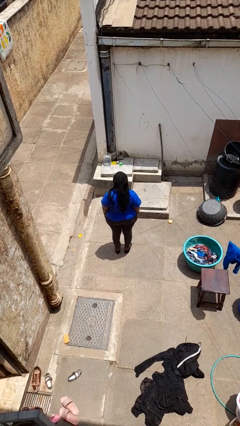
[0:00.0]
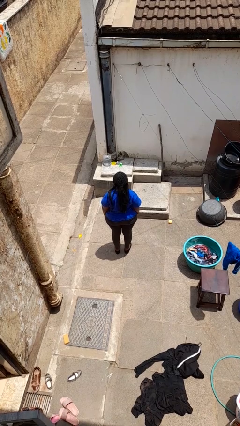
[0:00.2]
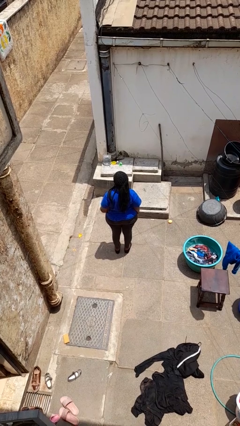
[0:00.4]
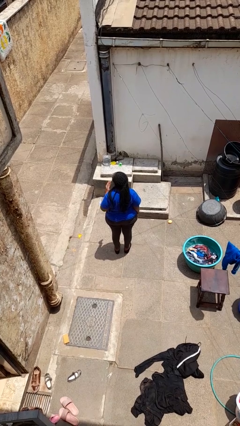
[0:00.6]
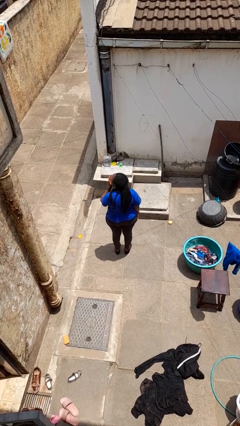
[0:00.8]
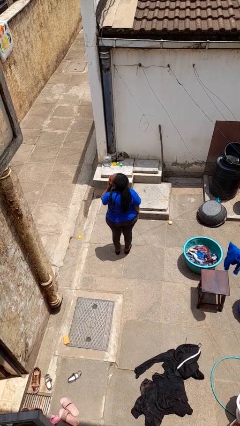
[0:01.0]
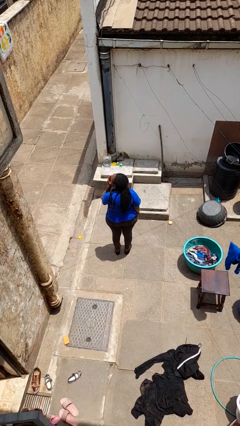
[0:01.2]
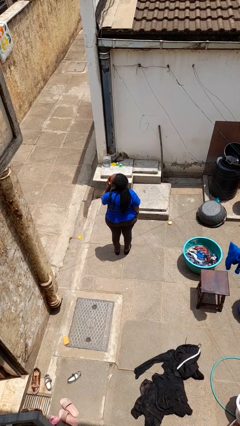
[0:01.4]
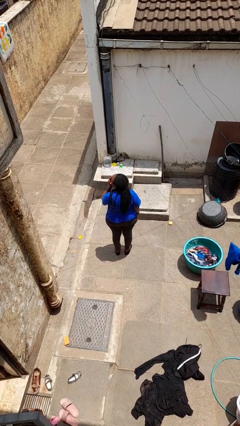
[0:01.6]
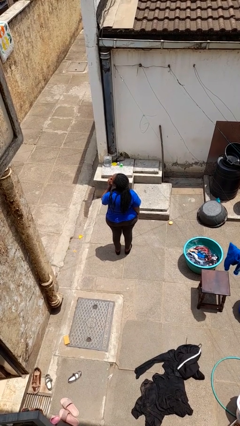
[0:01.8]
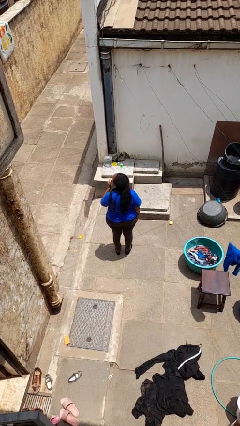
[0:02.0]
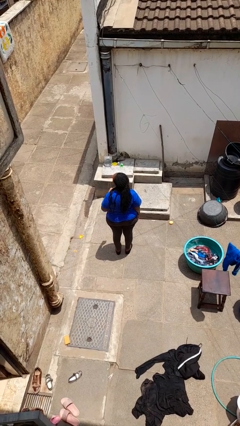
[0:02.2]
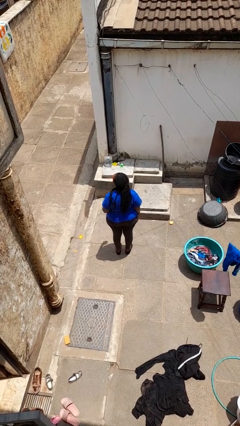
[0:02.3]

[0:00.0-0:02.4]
person yawns

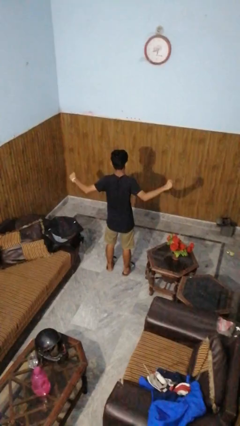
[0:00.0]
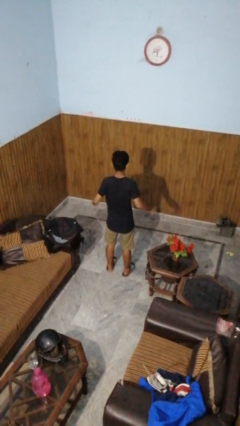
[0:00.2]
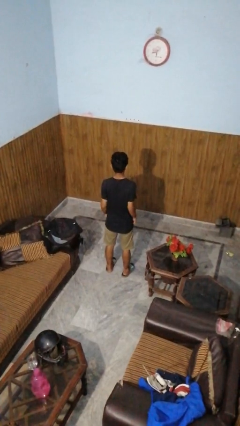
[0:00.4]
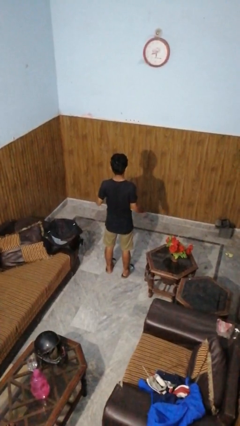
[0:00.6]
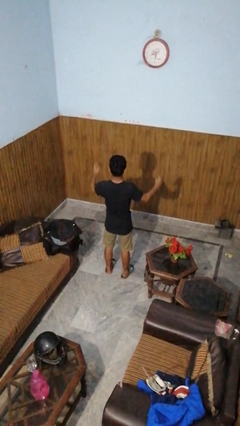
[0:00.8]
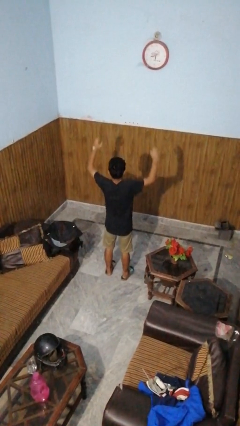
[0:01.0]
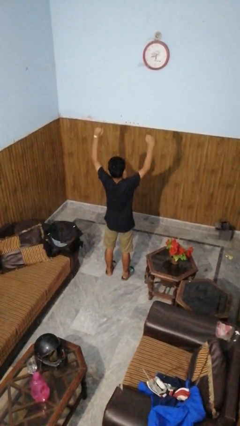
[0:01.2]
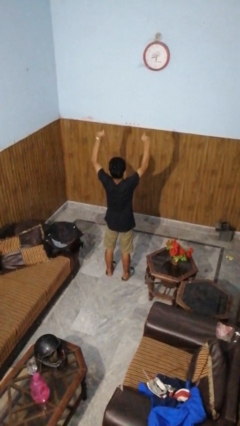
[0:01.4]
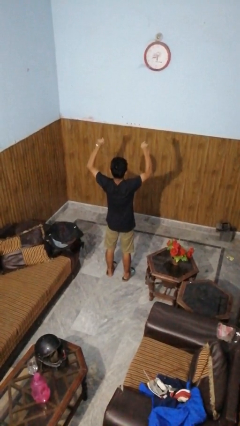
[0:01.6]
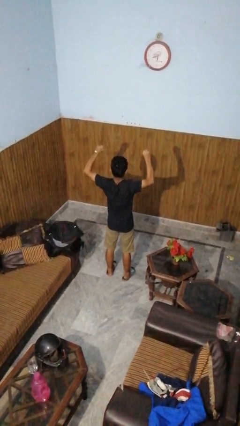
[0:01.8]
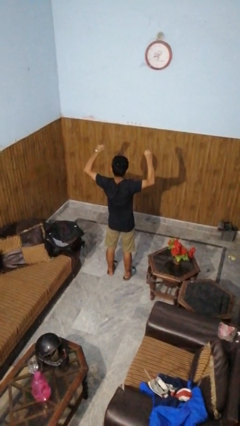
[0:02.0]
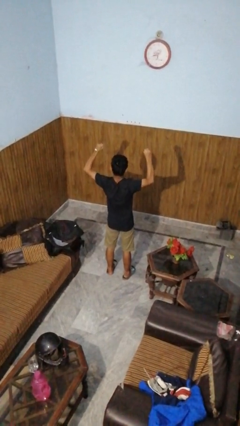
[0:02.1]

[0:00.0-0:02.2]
person stretches arms over head

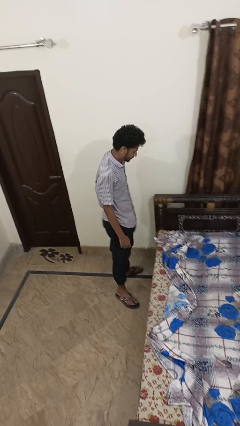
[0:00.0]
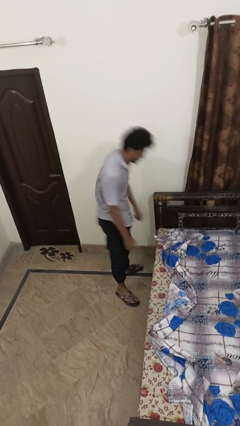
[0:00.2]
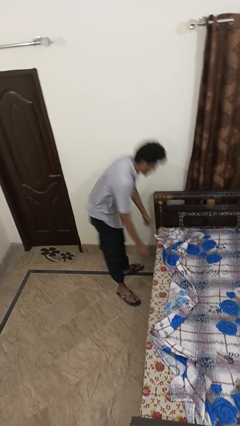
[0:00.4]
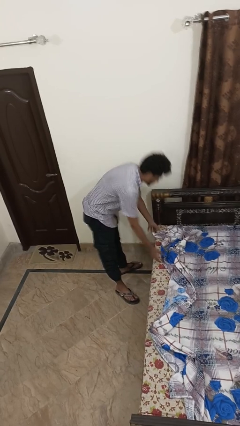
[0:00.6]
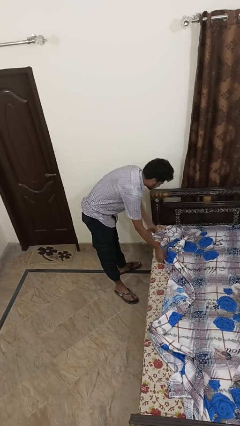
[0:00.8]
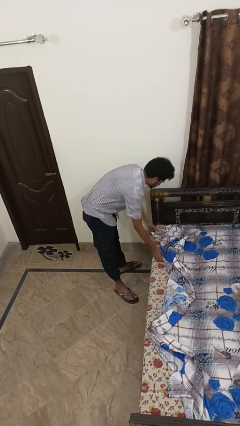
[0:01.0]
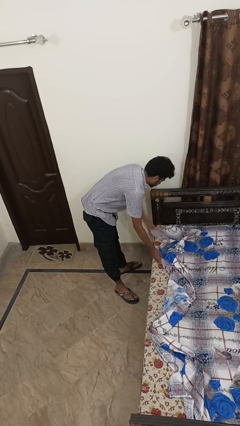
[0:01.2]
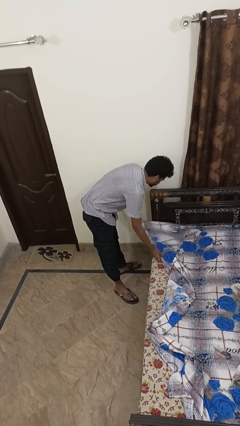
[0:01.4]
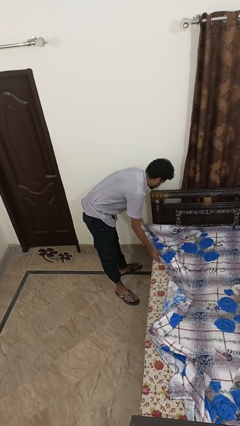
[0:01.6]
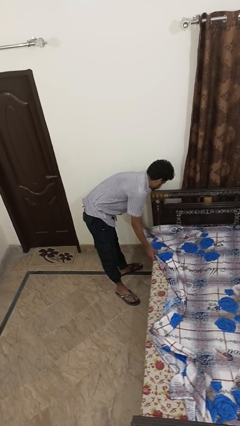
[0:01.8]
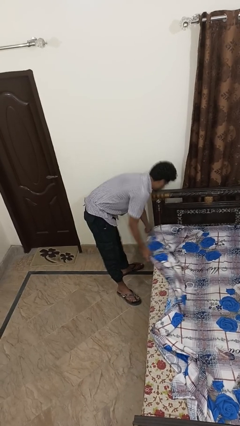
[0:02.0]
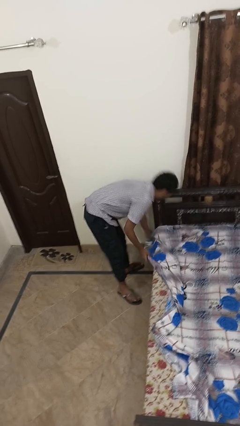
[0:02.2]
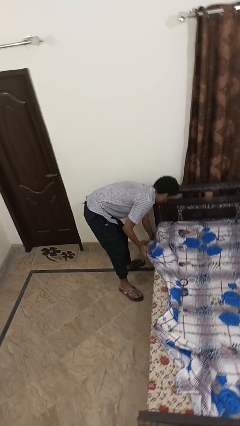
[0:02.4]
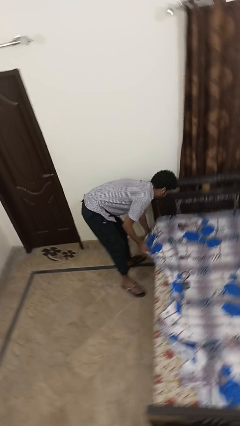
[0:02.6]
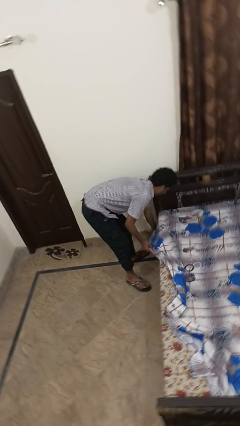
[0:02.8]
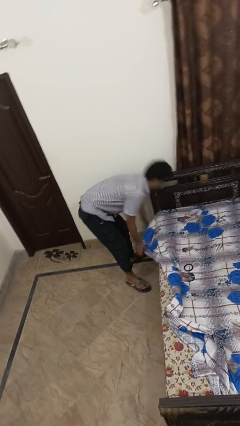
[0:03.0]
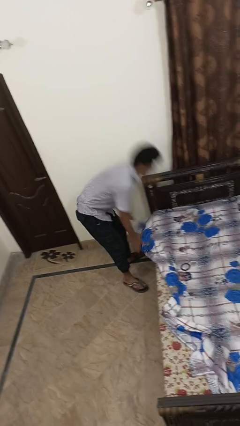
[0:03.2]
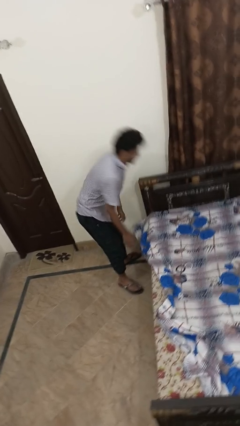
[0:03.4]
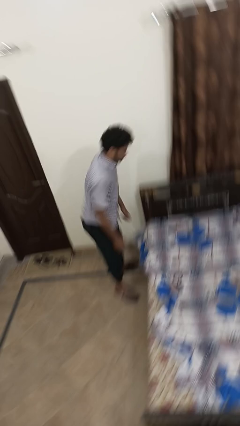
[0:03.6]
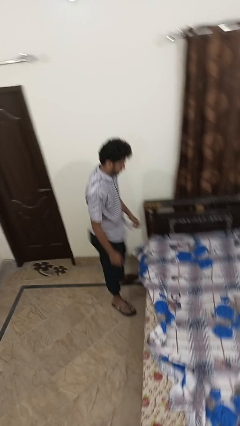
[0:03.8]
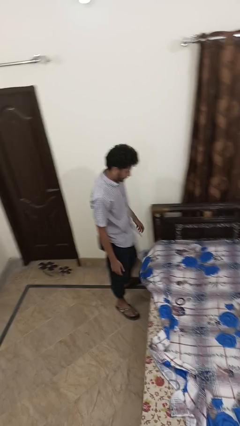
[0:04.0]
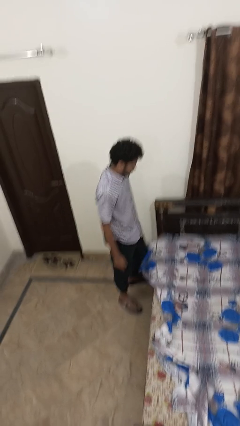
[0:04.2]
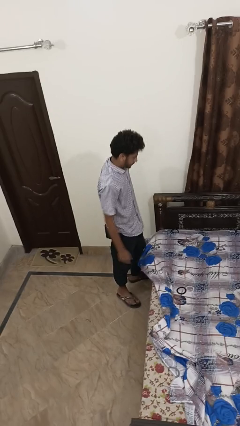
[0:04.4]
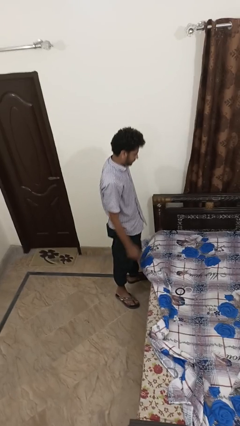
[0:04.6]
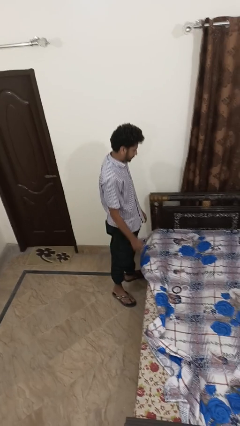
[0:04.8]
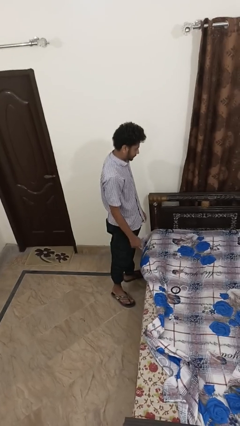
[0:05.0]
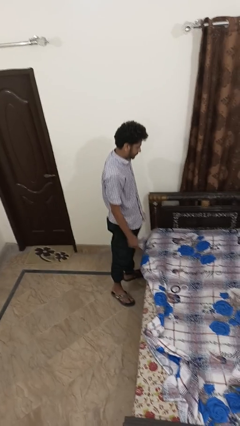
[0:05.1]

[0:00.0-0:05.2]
person makes bed

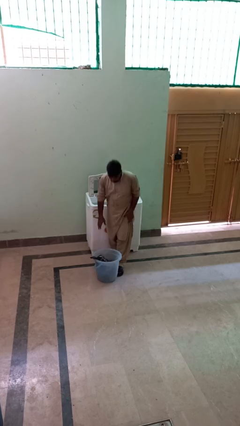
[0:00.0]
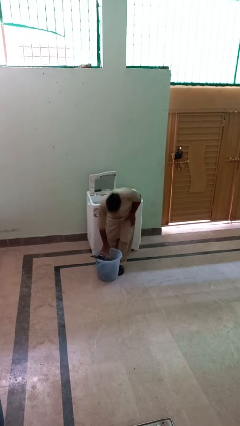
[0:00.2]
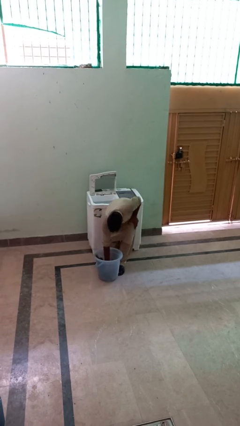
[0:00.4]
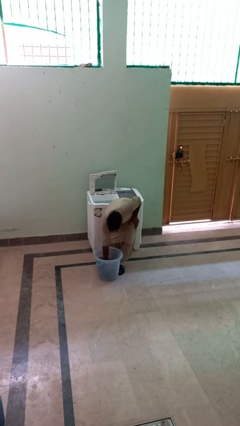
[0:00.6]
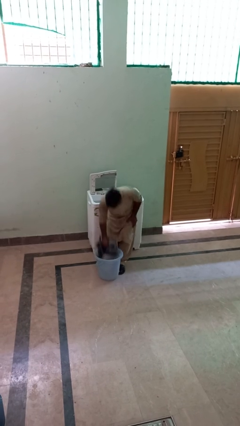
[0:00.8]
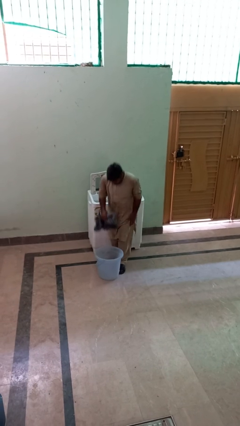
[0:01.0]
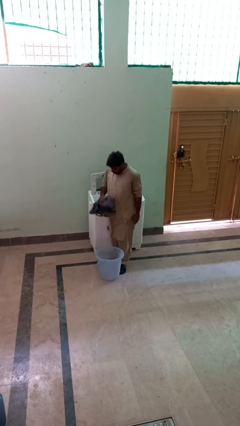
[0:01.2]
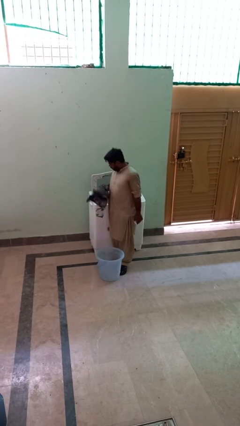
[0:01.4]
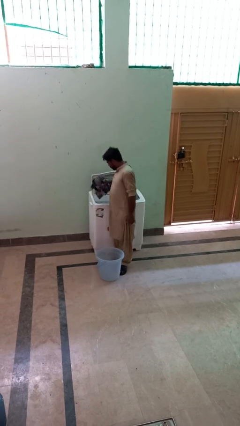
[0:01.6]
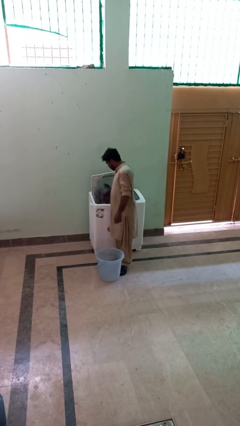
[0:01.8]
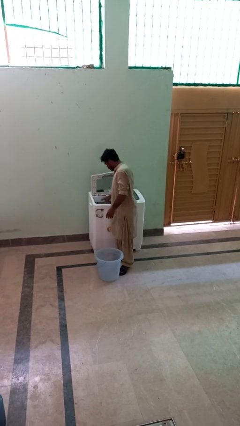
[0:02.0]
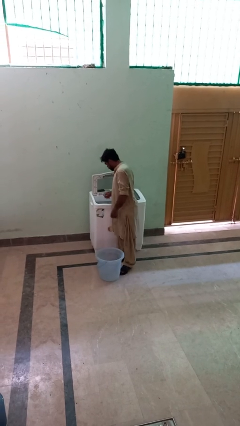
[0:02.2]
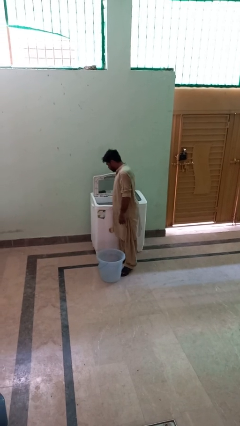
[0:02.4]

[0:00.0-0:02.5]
person loads clotheswasher

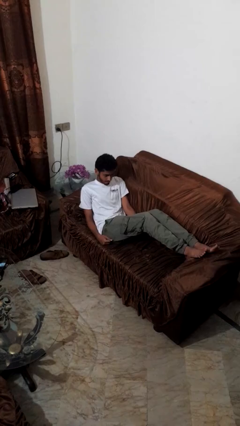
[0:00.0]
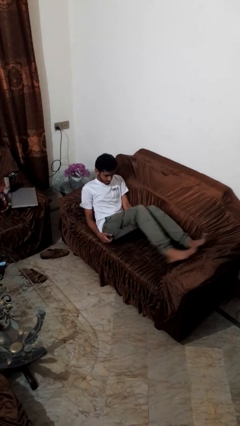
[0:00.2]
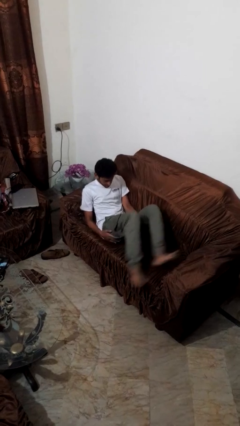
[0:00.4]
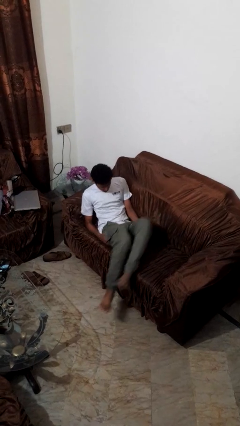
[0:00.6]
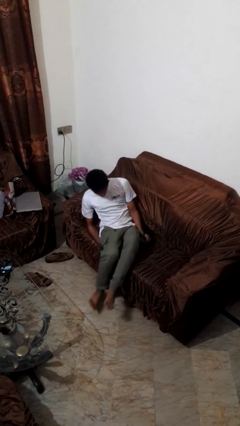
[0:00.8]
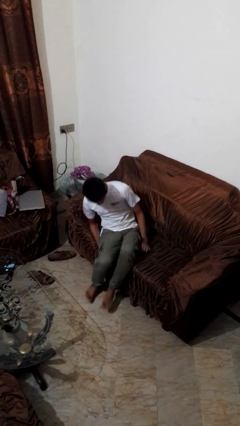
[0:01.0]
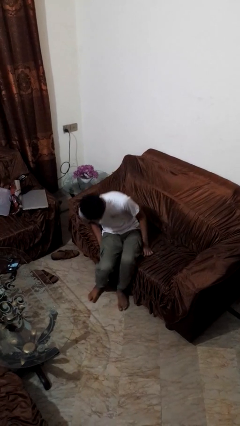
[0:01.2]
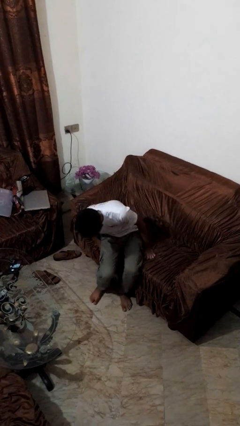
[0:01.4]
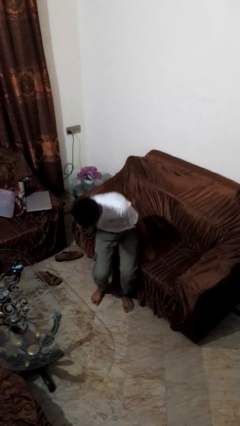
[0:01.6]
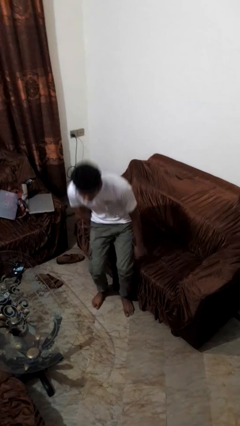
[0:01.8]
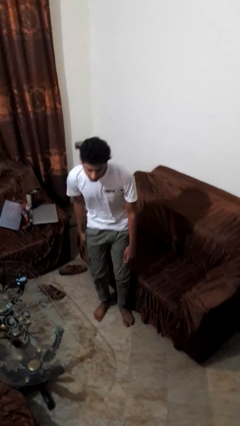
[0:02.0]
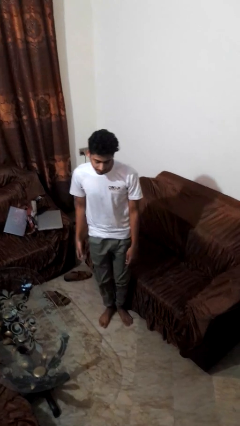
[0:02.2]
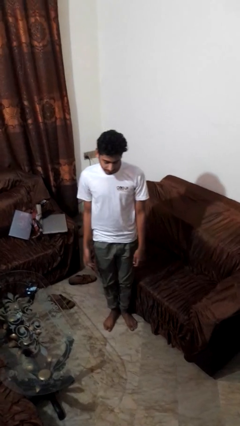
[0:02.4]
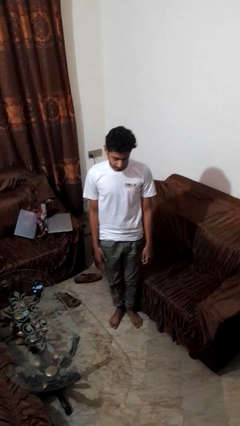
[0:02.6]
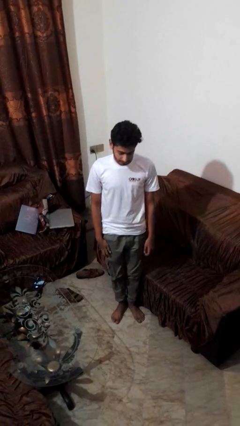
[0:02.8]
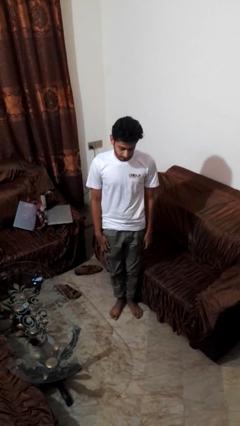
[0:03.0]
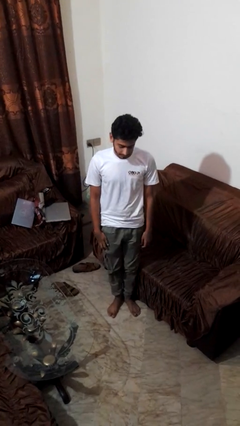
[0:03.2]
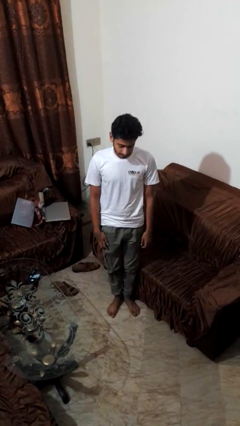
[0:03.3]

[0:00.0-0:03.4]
person stands up

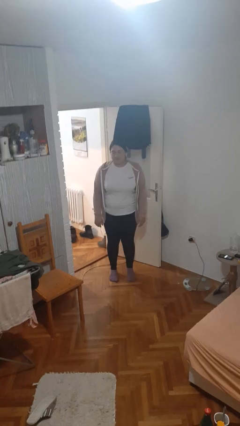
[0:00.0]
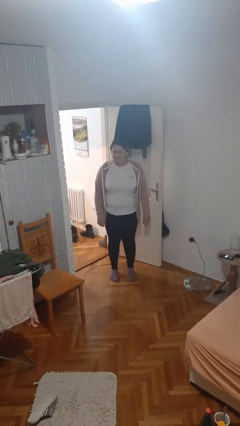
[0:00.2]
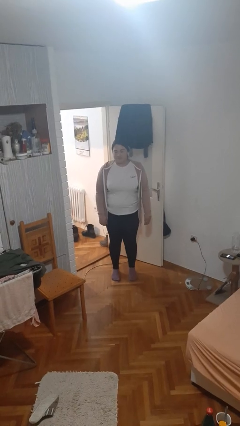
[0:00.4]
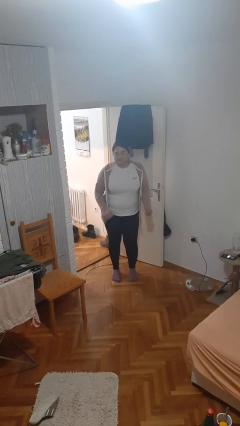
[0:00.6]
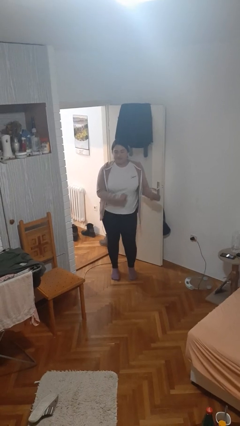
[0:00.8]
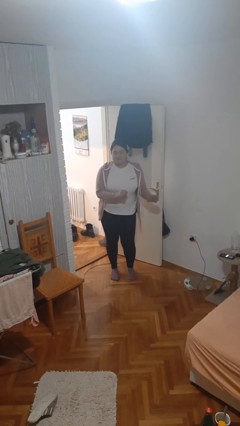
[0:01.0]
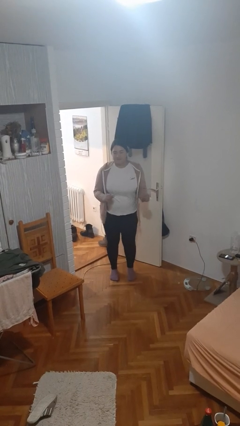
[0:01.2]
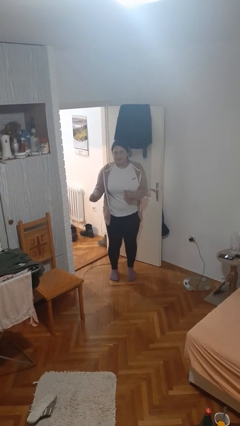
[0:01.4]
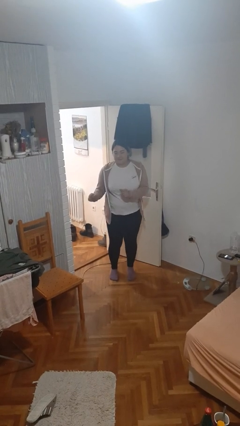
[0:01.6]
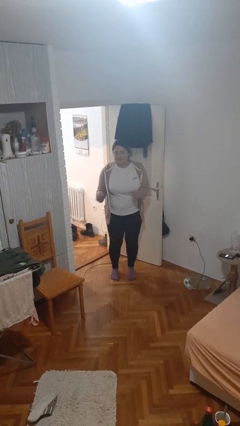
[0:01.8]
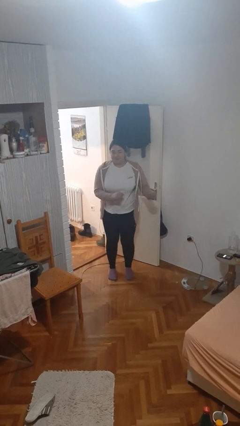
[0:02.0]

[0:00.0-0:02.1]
person dances in place
